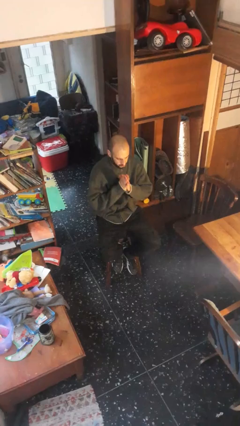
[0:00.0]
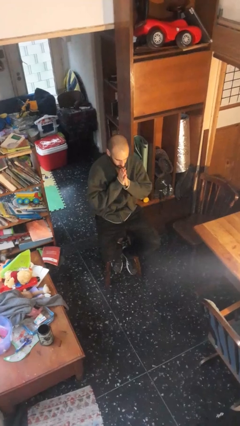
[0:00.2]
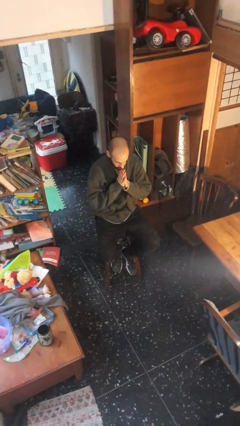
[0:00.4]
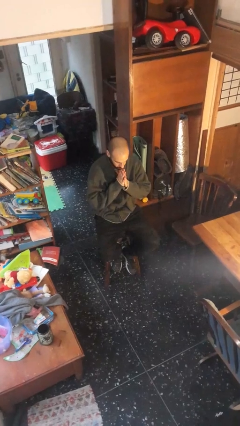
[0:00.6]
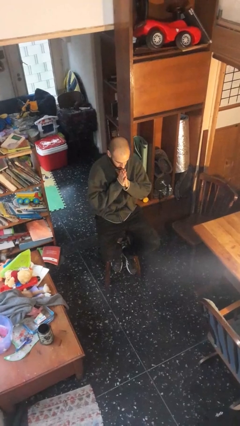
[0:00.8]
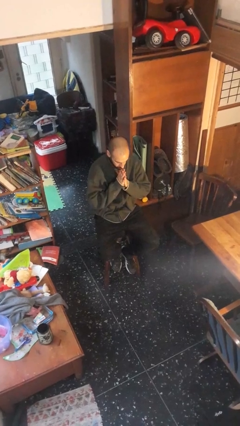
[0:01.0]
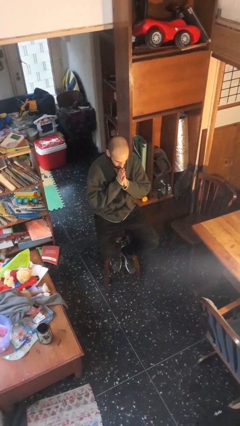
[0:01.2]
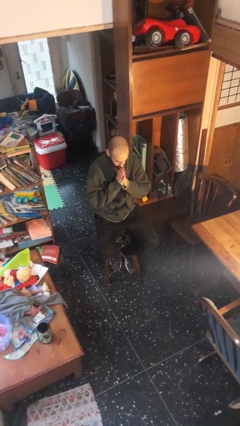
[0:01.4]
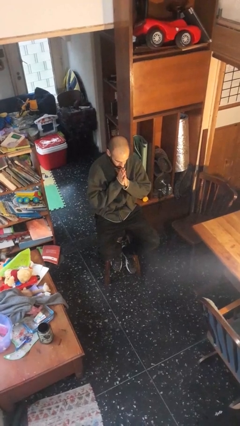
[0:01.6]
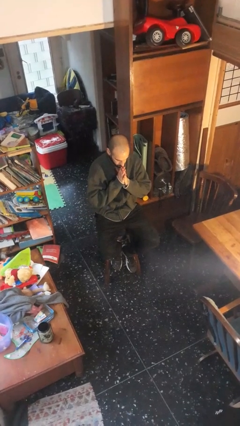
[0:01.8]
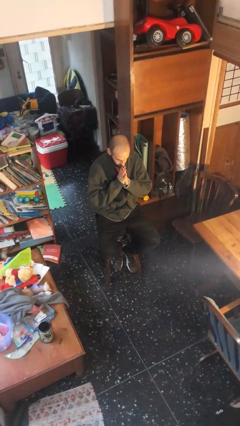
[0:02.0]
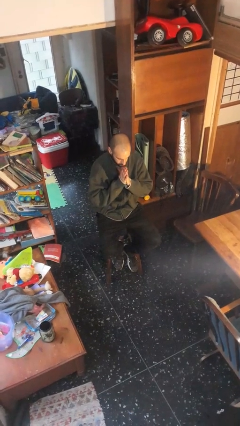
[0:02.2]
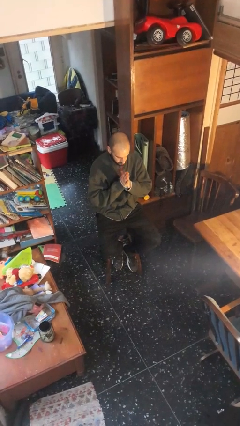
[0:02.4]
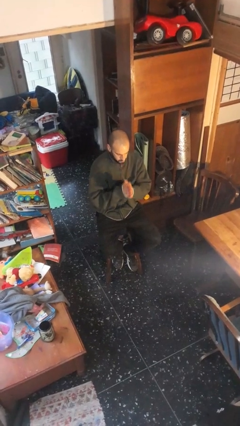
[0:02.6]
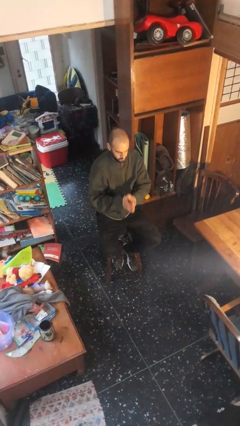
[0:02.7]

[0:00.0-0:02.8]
person prays

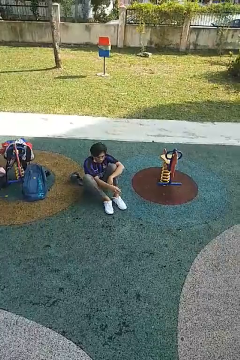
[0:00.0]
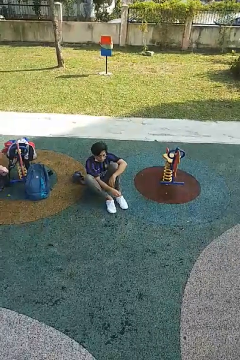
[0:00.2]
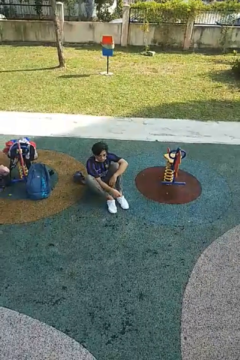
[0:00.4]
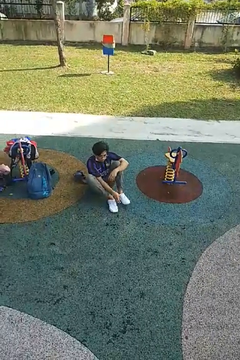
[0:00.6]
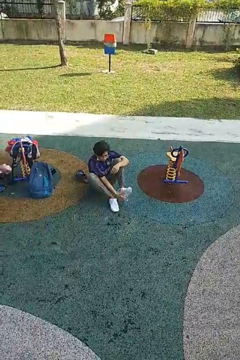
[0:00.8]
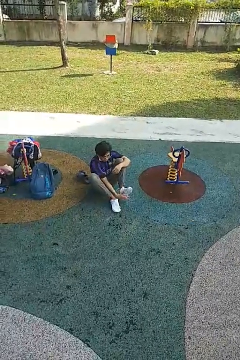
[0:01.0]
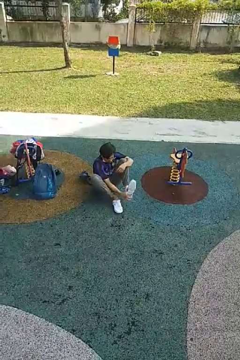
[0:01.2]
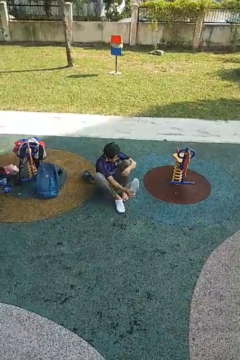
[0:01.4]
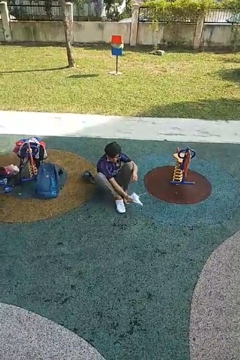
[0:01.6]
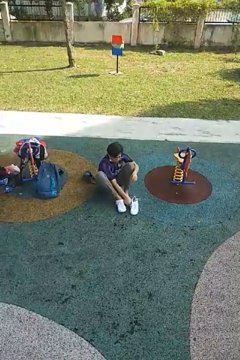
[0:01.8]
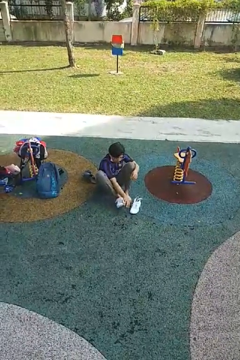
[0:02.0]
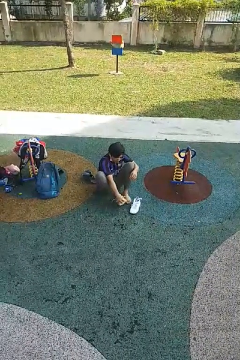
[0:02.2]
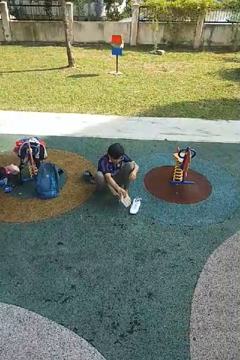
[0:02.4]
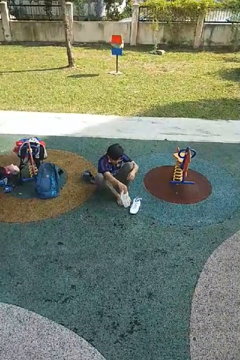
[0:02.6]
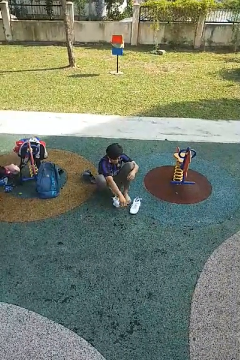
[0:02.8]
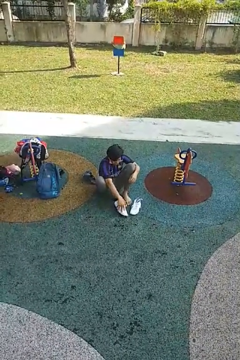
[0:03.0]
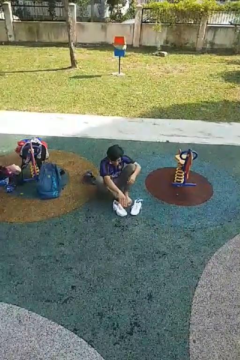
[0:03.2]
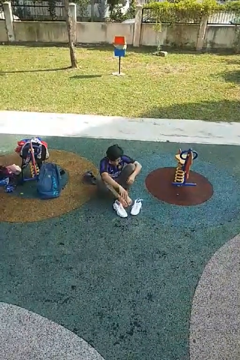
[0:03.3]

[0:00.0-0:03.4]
person takes off shoes

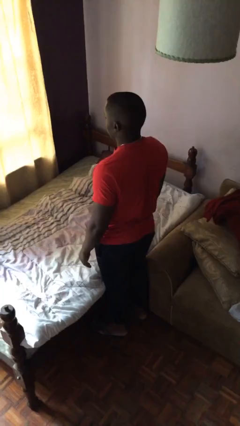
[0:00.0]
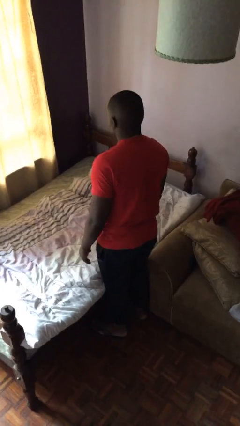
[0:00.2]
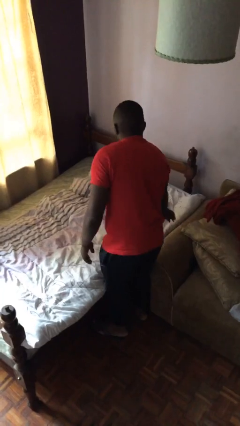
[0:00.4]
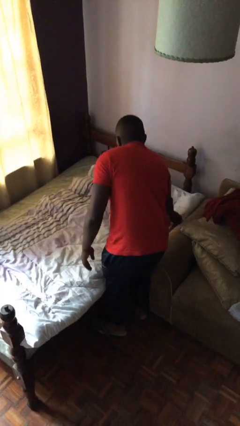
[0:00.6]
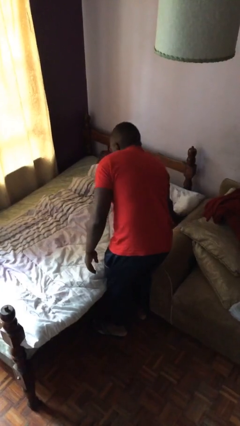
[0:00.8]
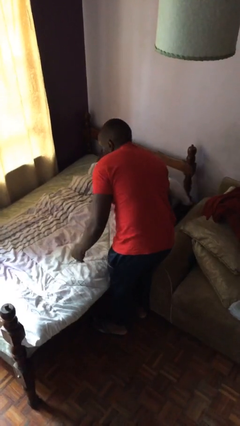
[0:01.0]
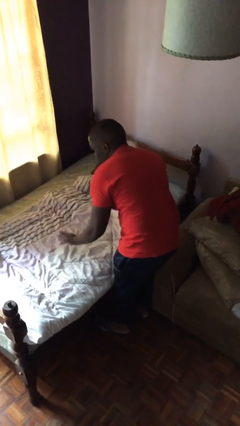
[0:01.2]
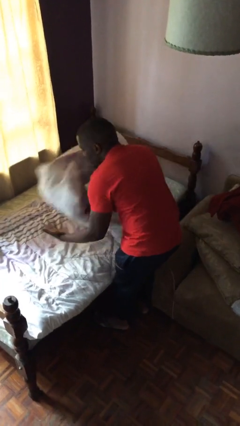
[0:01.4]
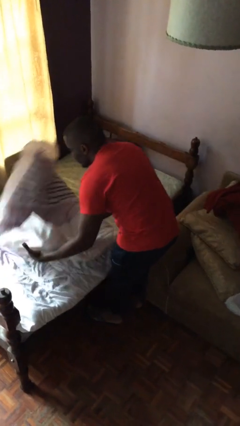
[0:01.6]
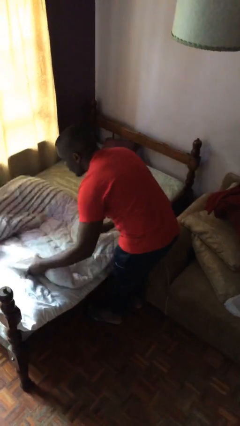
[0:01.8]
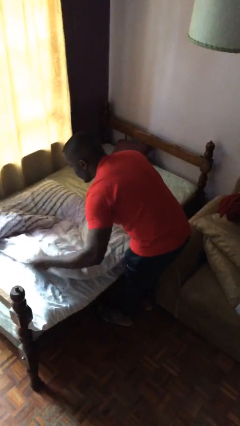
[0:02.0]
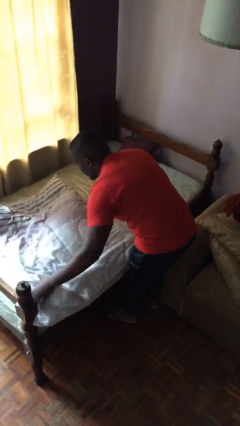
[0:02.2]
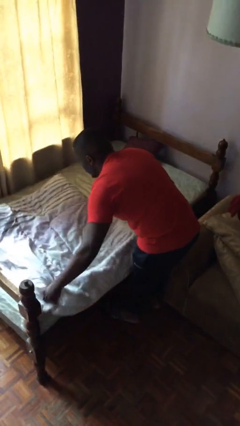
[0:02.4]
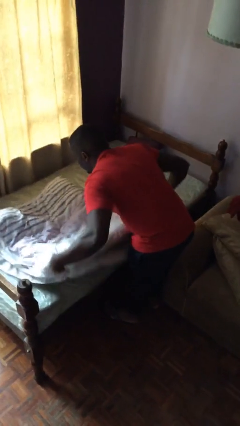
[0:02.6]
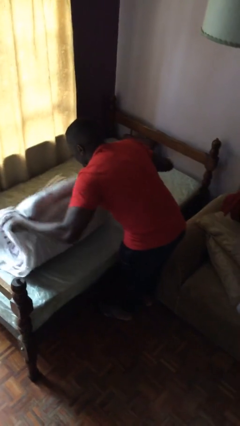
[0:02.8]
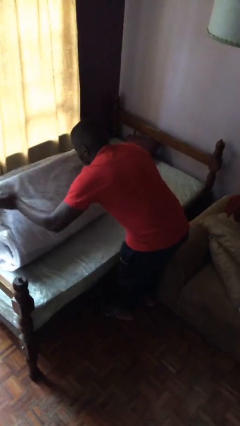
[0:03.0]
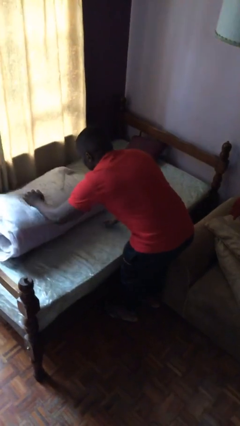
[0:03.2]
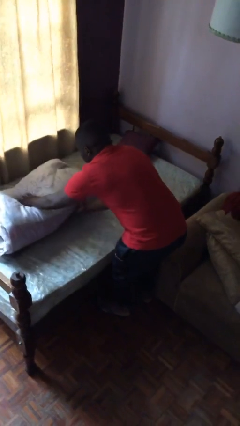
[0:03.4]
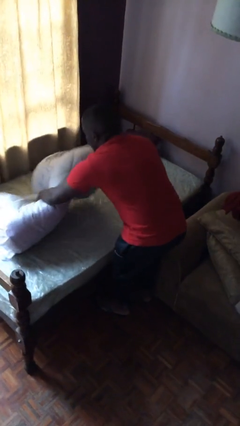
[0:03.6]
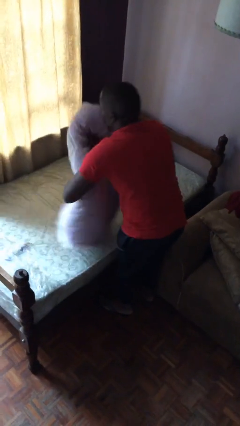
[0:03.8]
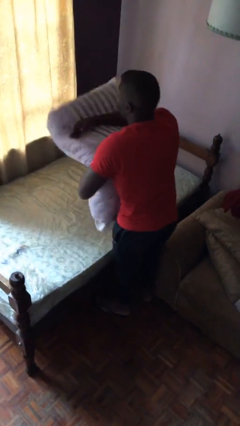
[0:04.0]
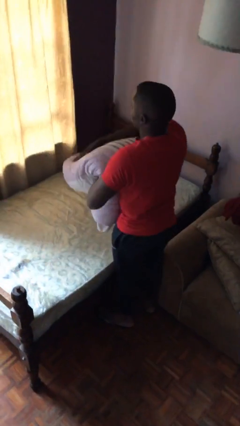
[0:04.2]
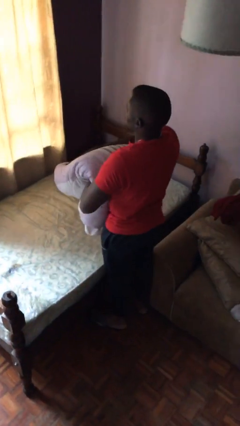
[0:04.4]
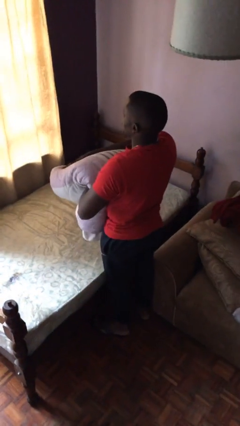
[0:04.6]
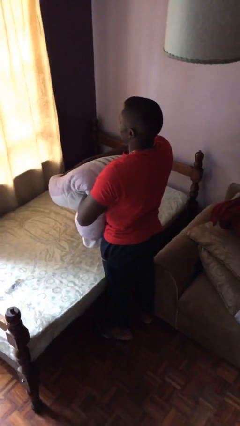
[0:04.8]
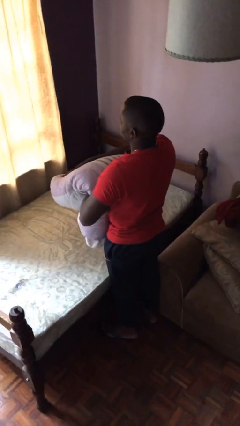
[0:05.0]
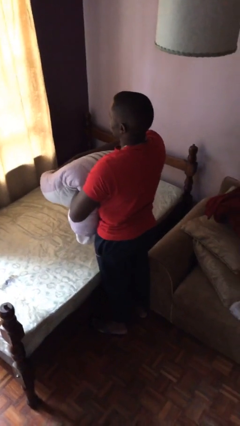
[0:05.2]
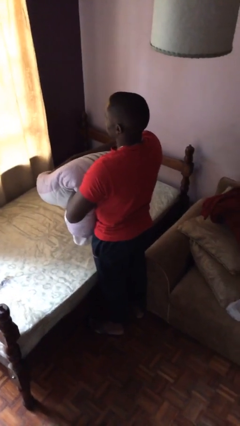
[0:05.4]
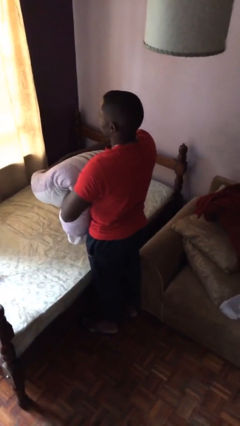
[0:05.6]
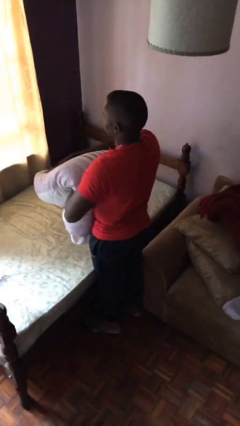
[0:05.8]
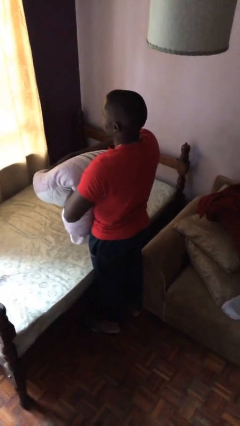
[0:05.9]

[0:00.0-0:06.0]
person folds blanket

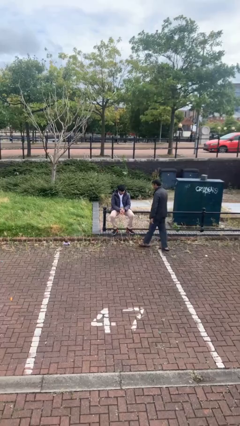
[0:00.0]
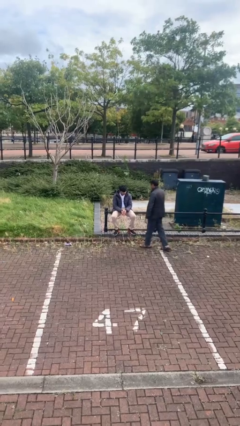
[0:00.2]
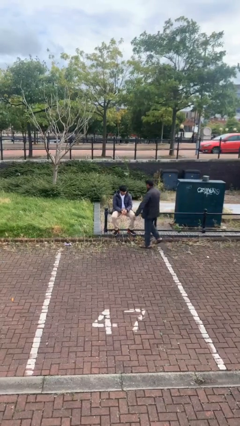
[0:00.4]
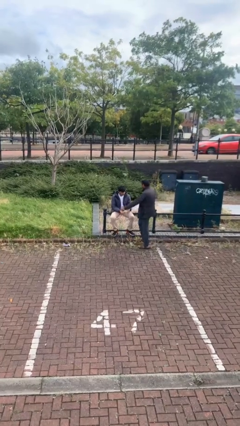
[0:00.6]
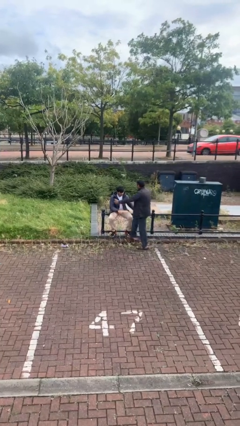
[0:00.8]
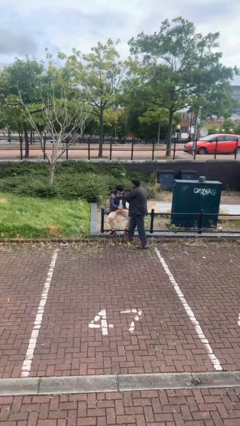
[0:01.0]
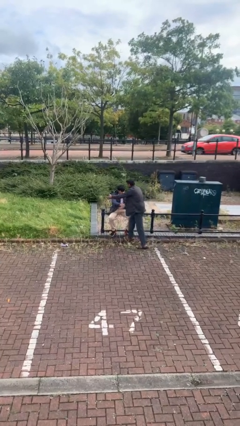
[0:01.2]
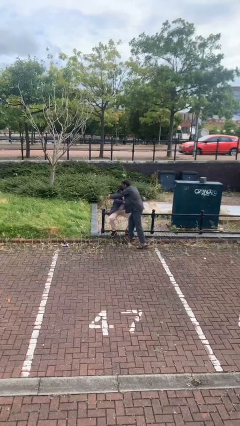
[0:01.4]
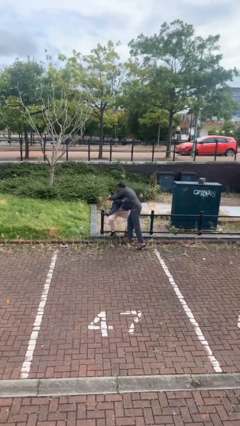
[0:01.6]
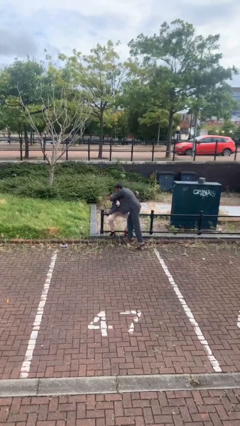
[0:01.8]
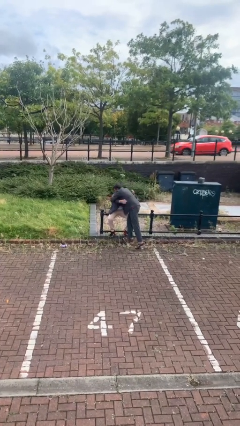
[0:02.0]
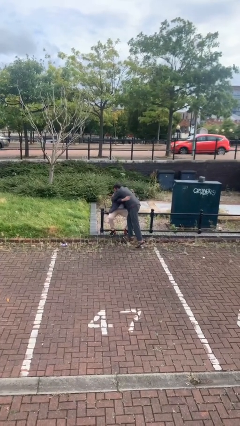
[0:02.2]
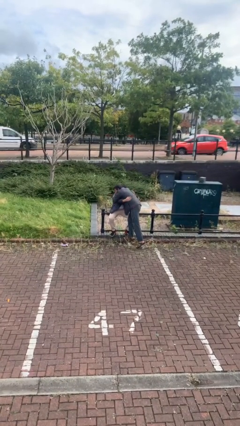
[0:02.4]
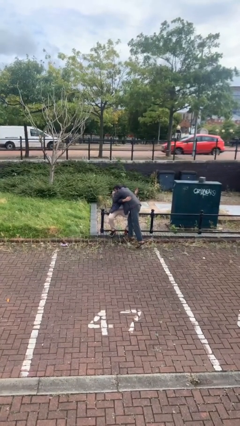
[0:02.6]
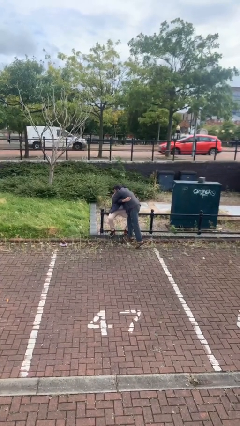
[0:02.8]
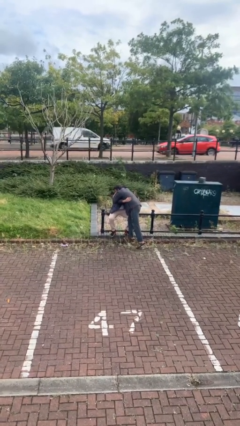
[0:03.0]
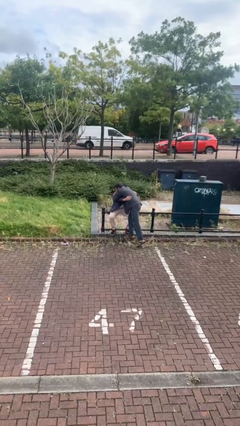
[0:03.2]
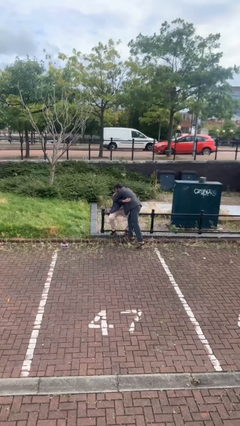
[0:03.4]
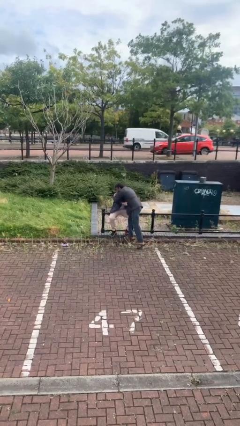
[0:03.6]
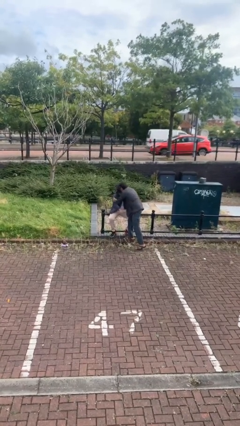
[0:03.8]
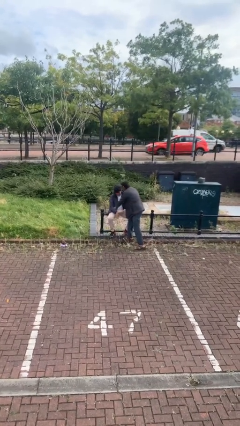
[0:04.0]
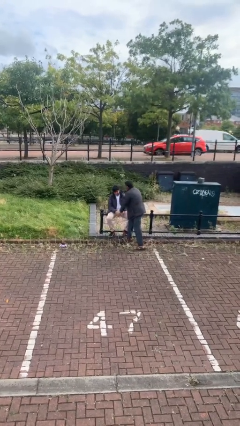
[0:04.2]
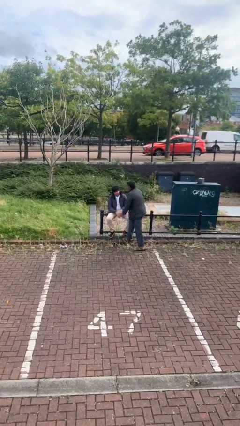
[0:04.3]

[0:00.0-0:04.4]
person embraces person

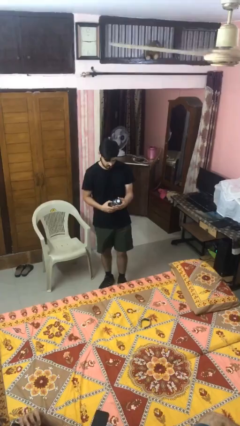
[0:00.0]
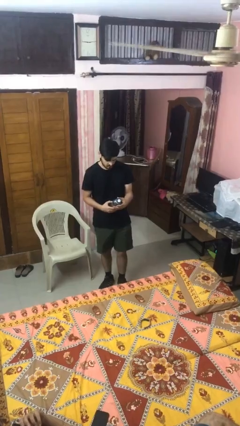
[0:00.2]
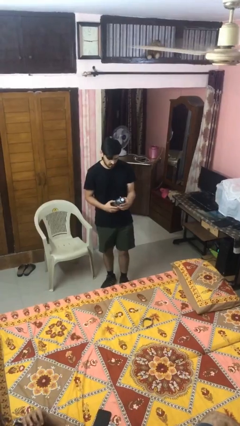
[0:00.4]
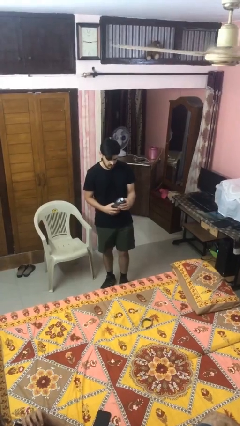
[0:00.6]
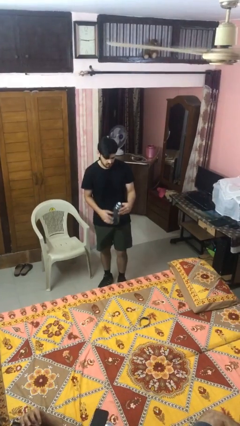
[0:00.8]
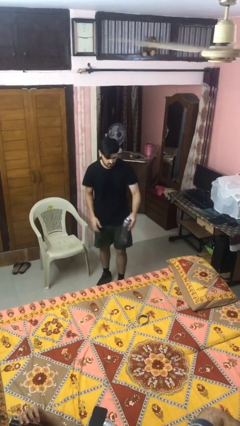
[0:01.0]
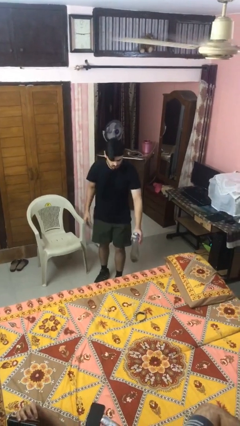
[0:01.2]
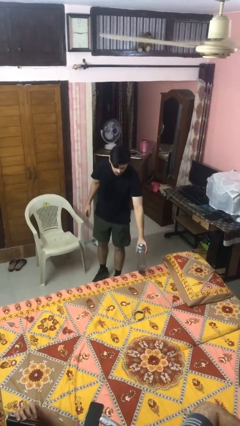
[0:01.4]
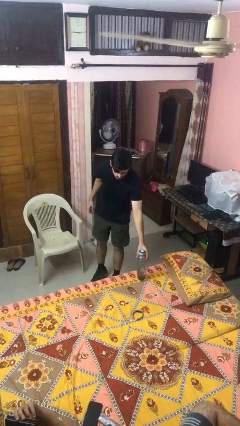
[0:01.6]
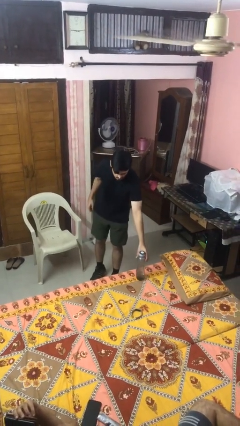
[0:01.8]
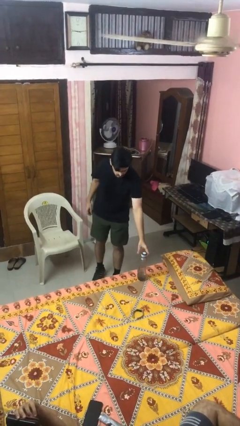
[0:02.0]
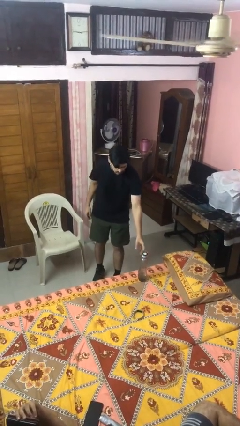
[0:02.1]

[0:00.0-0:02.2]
person puts down object on bed
